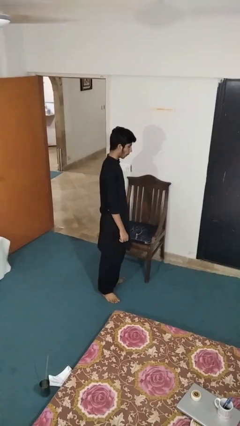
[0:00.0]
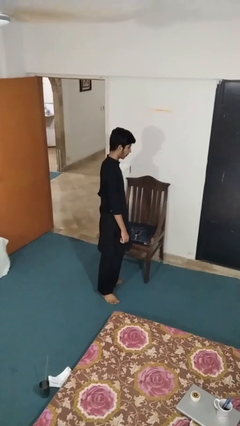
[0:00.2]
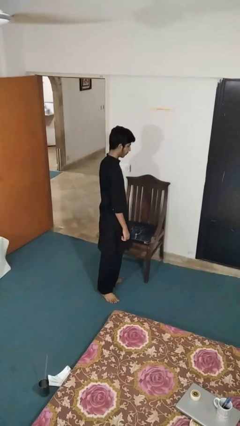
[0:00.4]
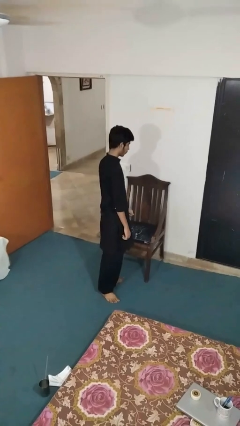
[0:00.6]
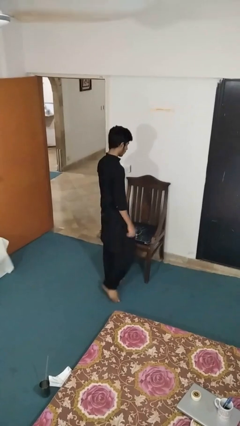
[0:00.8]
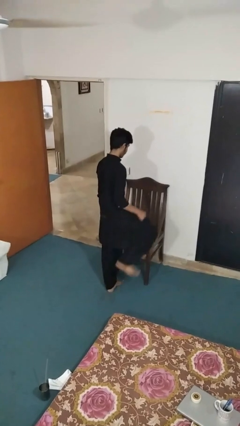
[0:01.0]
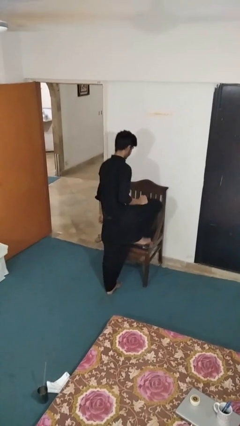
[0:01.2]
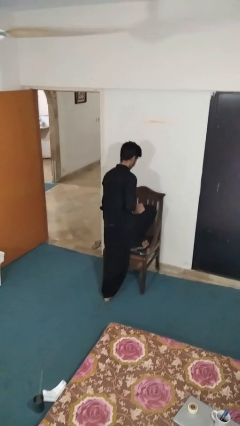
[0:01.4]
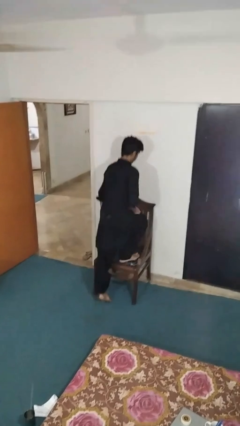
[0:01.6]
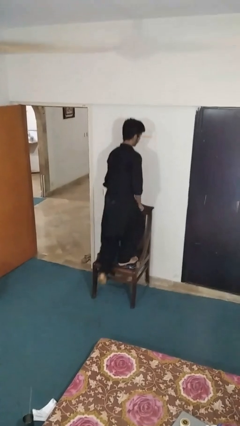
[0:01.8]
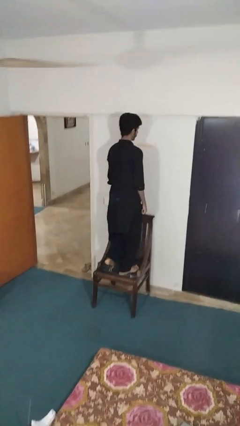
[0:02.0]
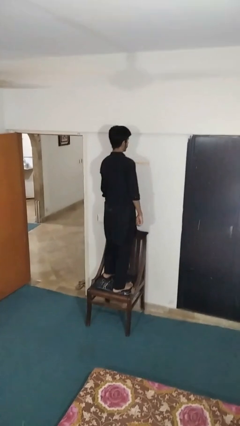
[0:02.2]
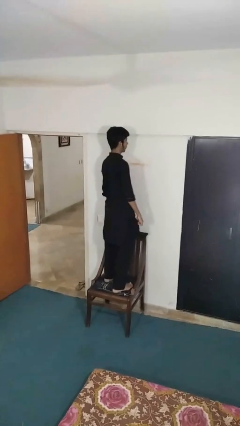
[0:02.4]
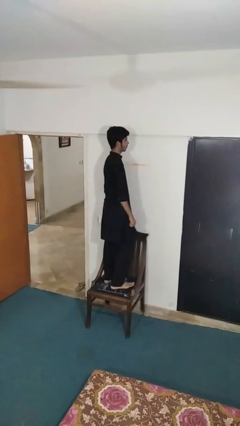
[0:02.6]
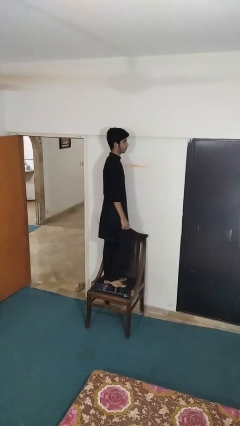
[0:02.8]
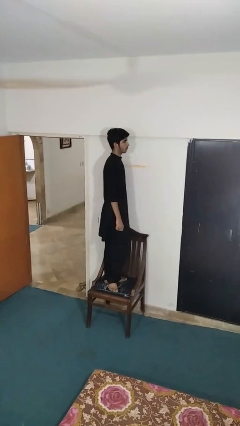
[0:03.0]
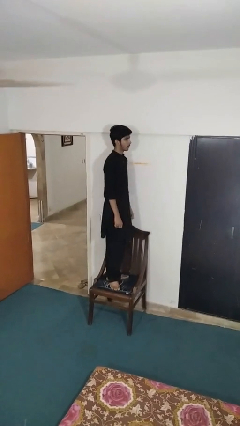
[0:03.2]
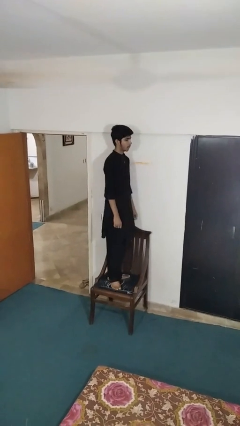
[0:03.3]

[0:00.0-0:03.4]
person climbs on chair

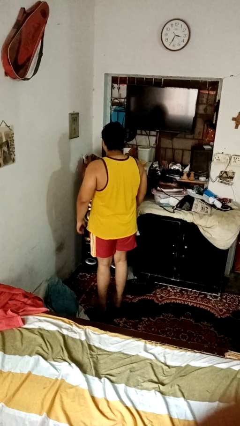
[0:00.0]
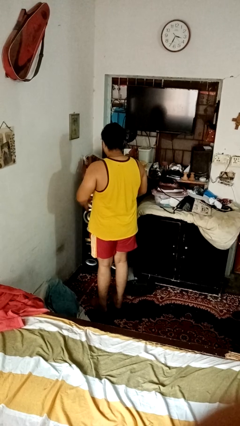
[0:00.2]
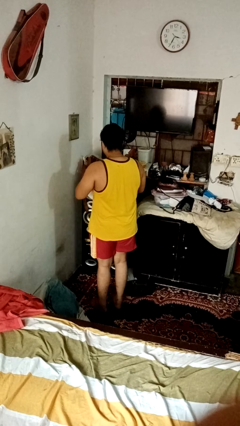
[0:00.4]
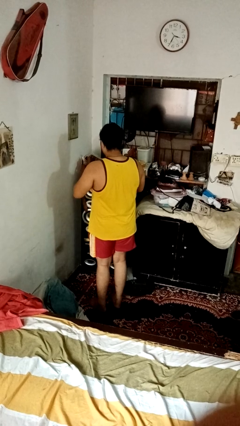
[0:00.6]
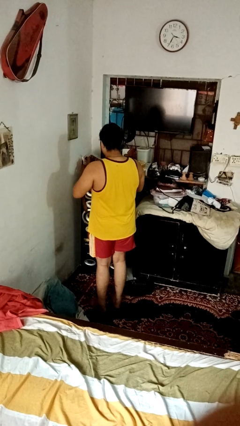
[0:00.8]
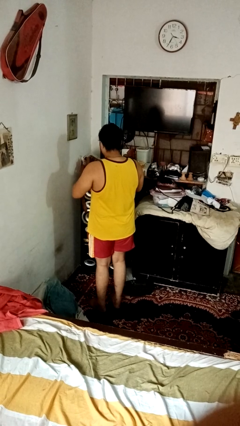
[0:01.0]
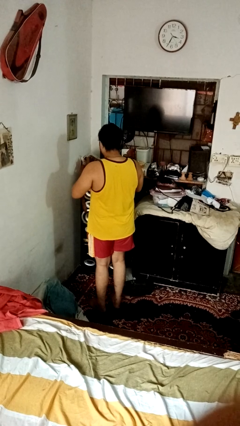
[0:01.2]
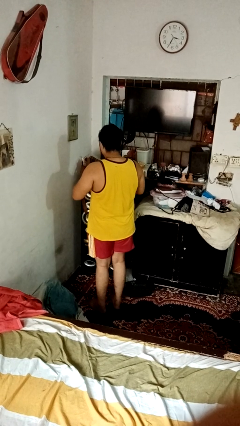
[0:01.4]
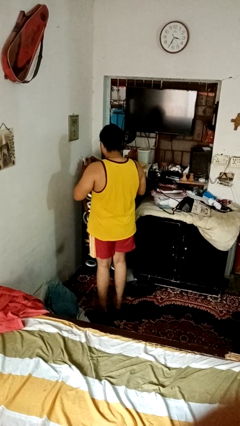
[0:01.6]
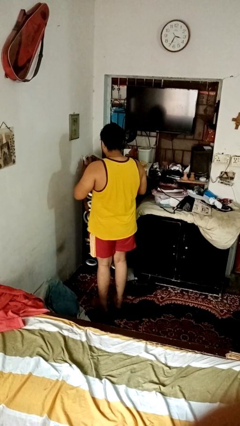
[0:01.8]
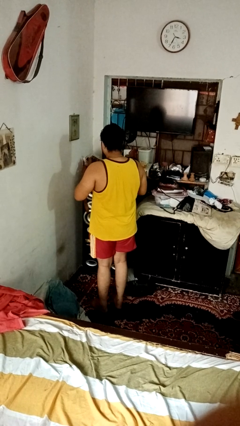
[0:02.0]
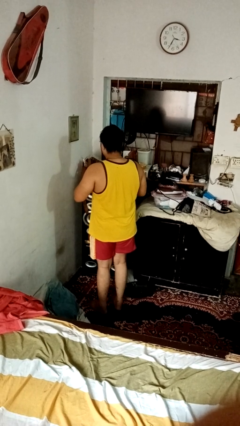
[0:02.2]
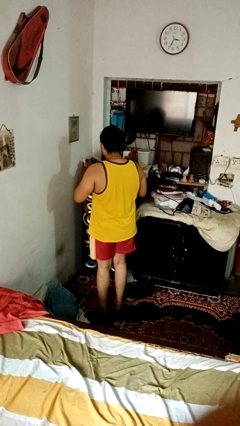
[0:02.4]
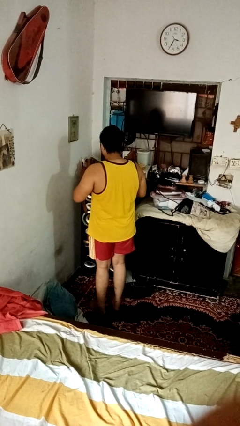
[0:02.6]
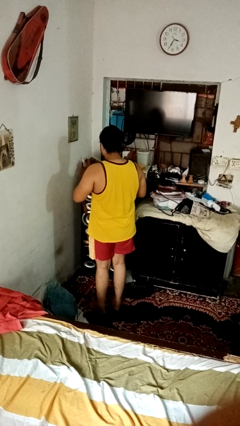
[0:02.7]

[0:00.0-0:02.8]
person tears paper

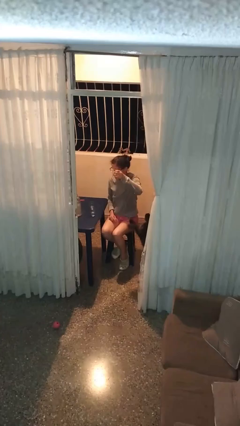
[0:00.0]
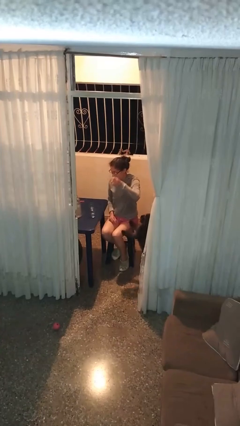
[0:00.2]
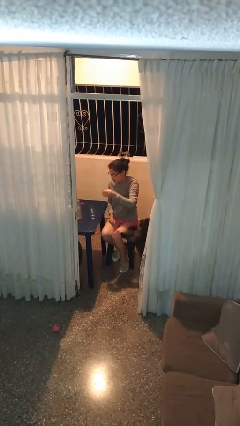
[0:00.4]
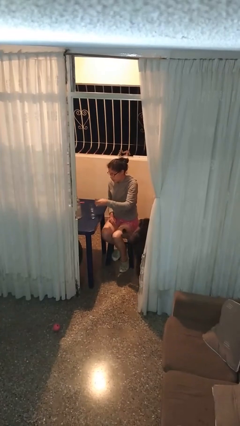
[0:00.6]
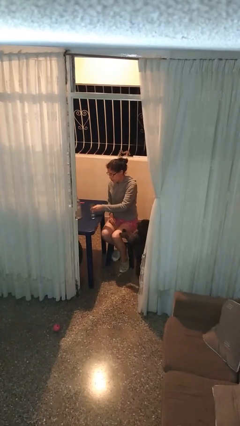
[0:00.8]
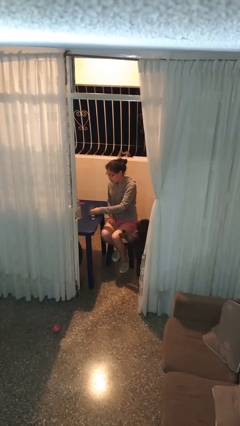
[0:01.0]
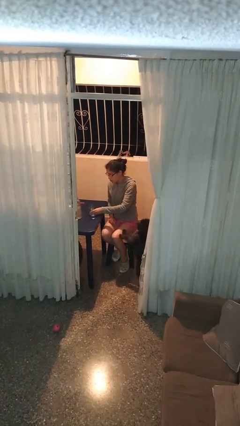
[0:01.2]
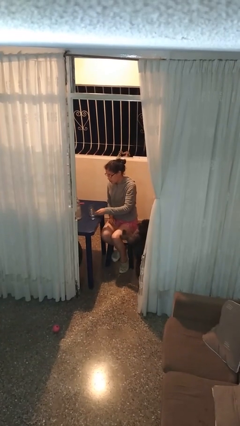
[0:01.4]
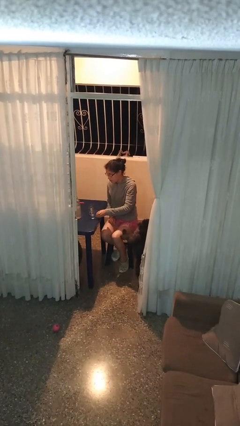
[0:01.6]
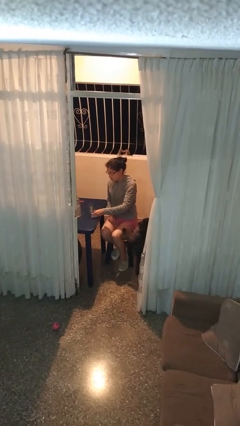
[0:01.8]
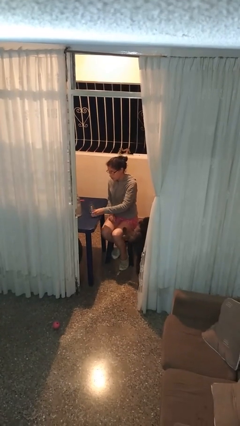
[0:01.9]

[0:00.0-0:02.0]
person puts down object on table

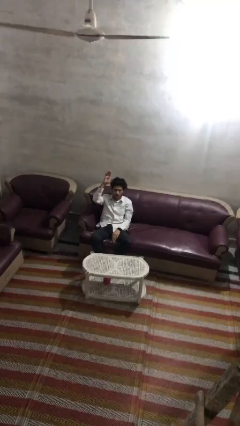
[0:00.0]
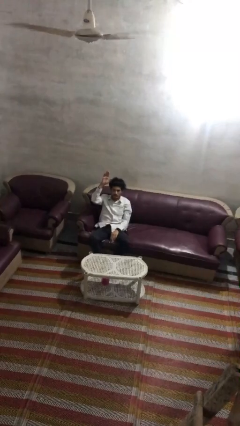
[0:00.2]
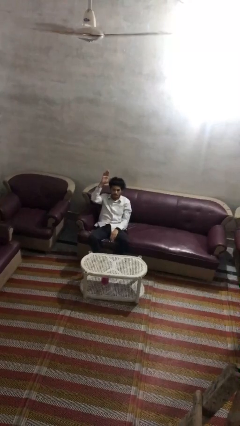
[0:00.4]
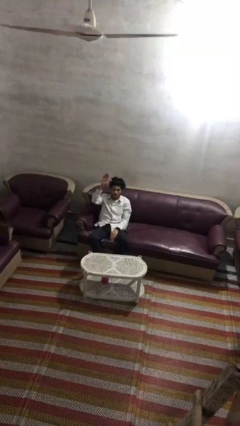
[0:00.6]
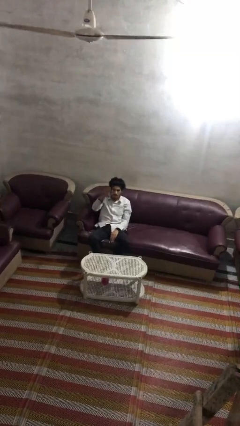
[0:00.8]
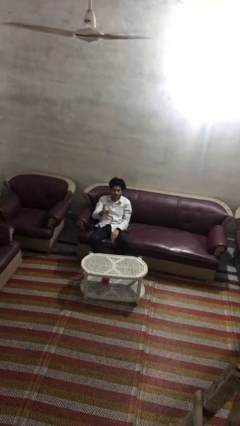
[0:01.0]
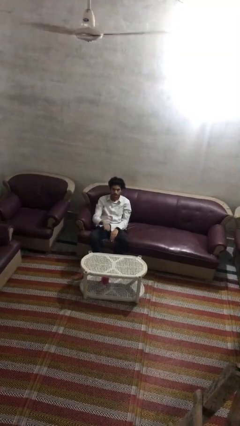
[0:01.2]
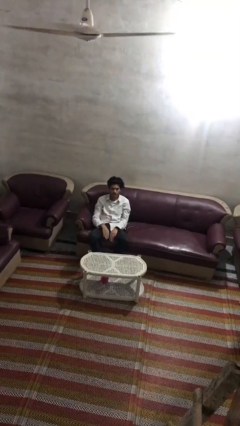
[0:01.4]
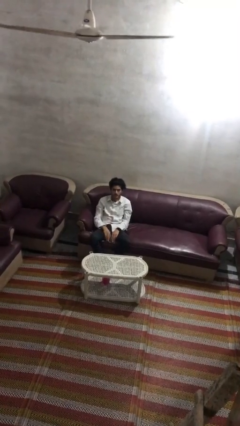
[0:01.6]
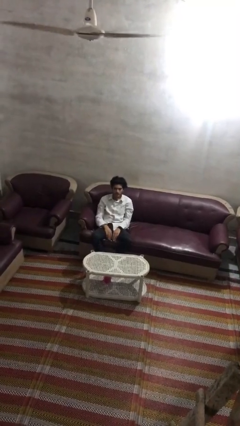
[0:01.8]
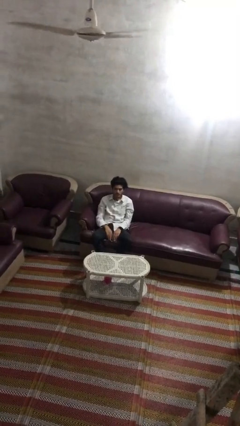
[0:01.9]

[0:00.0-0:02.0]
person gestures lower hand

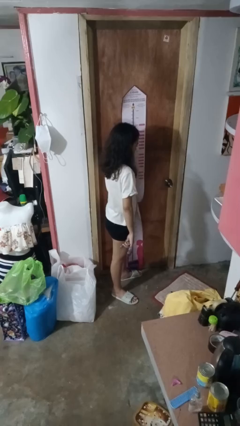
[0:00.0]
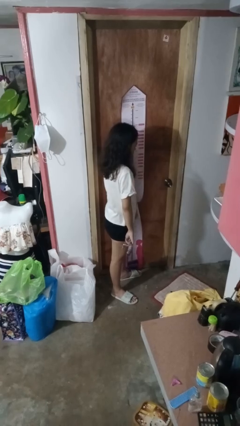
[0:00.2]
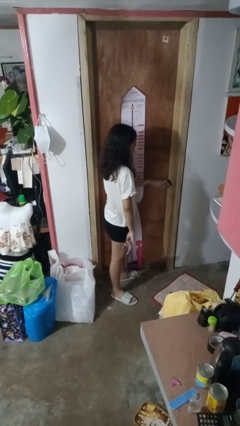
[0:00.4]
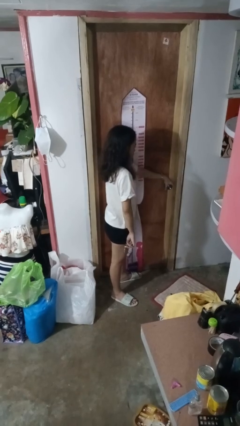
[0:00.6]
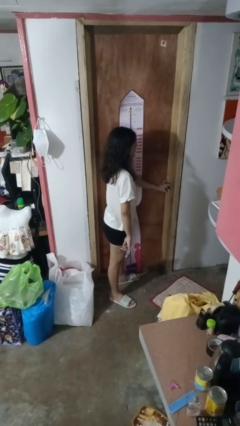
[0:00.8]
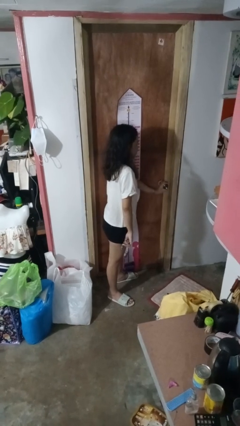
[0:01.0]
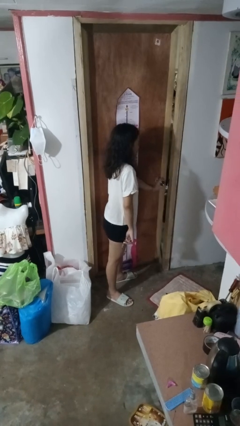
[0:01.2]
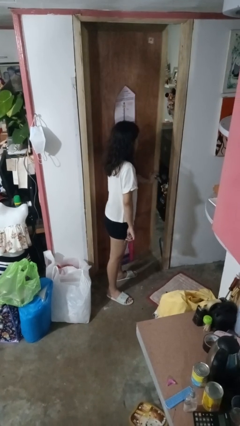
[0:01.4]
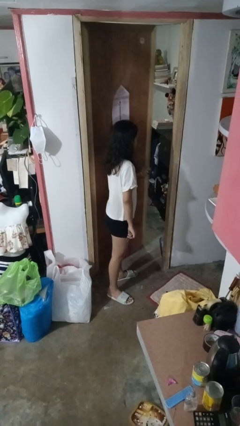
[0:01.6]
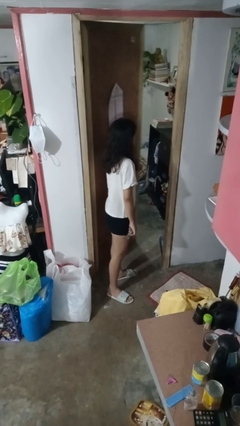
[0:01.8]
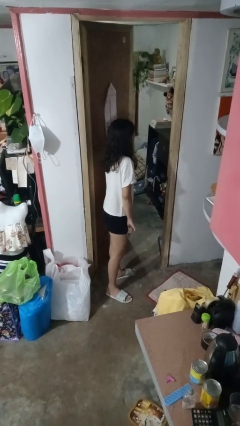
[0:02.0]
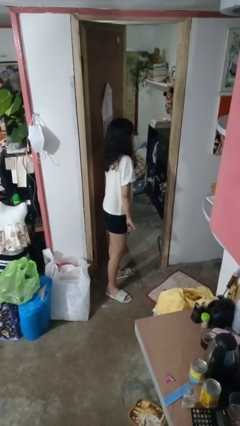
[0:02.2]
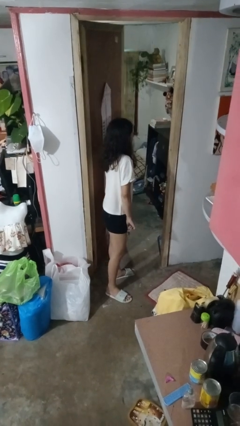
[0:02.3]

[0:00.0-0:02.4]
person opens facility door

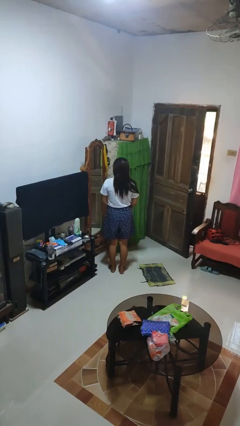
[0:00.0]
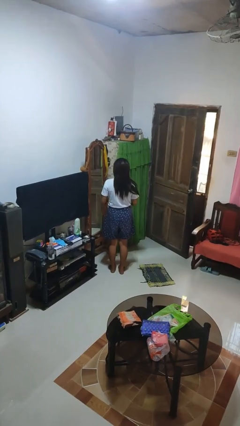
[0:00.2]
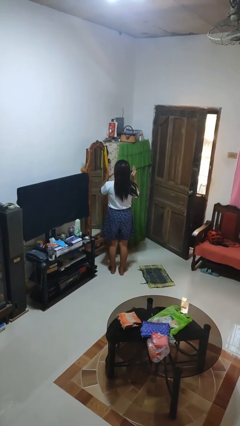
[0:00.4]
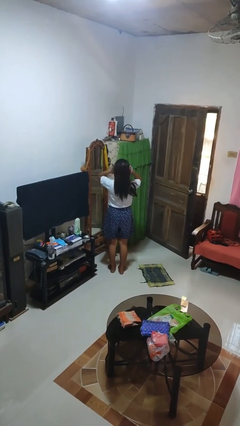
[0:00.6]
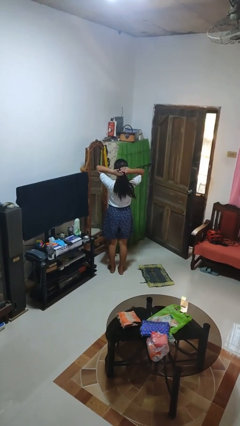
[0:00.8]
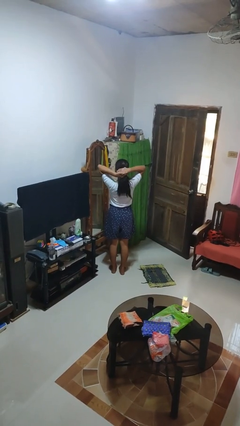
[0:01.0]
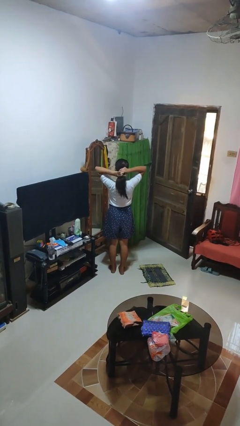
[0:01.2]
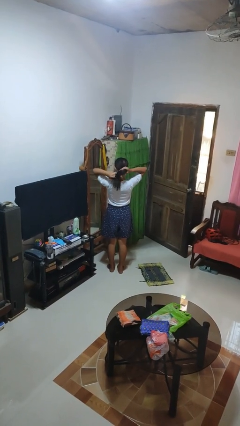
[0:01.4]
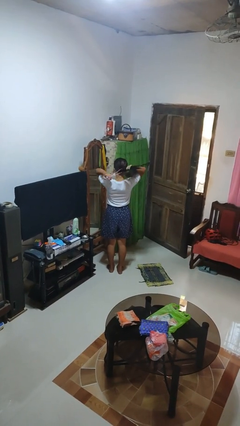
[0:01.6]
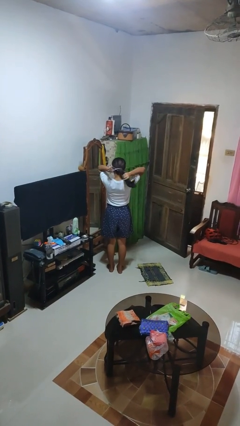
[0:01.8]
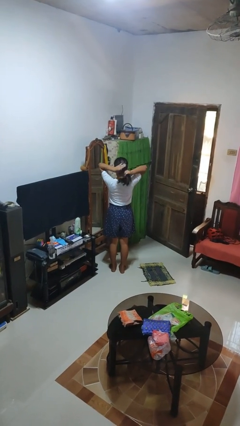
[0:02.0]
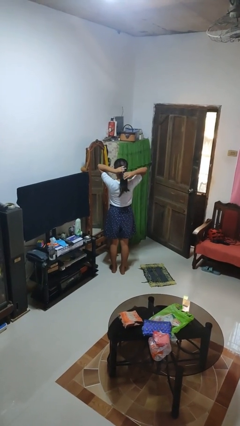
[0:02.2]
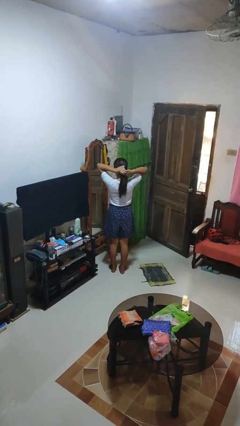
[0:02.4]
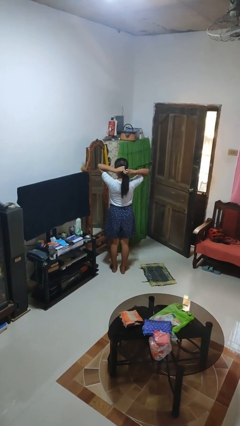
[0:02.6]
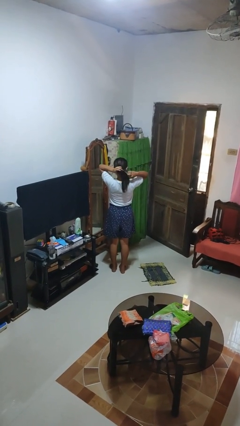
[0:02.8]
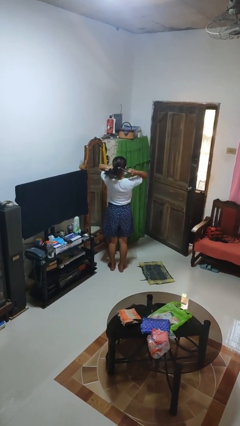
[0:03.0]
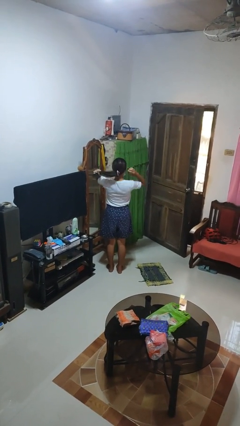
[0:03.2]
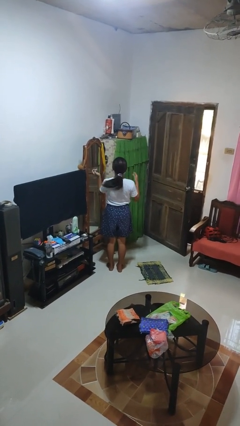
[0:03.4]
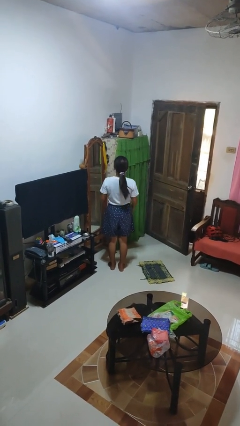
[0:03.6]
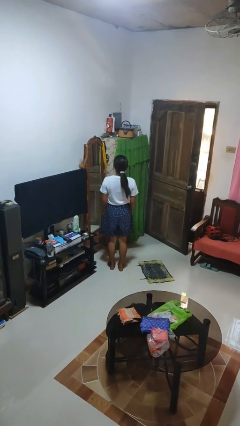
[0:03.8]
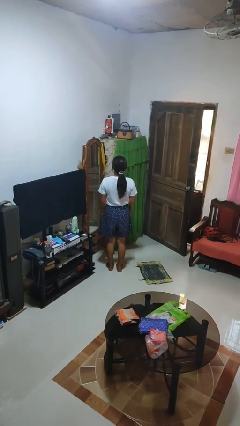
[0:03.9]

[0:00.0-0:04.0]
person puts hair in ponytail

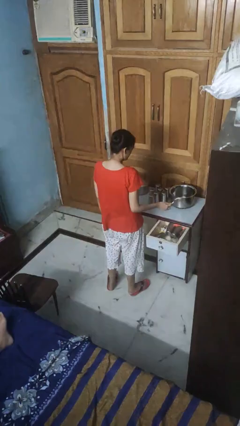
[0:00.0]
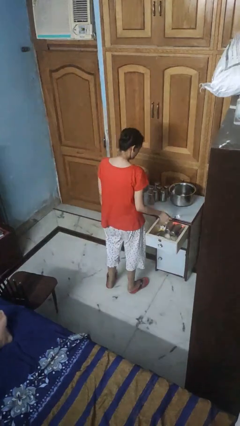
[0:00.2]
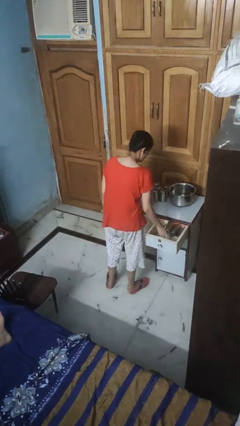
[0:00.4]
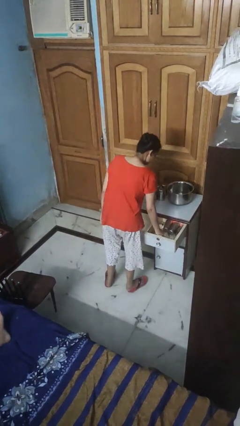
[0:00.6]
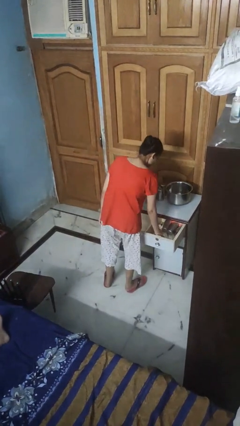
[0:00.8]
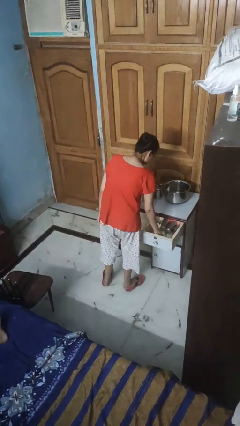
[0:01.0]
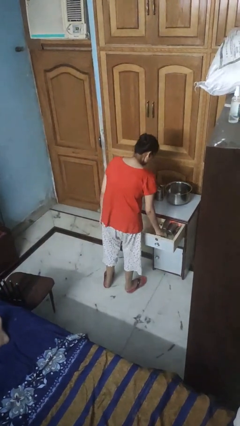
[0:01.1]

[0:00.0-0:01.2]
person puts object into kitchen drawer
